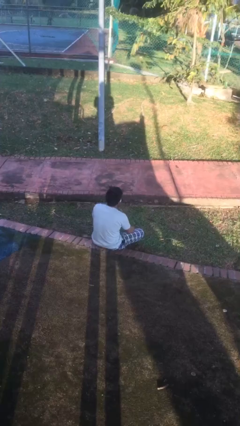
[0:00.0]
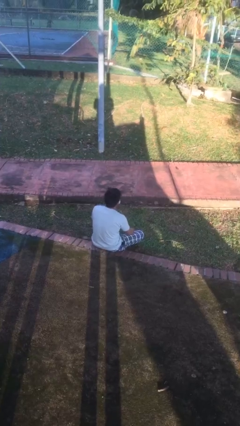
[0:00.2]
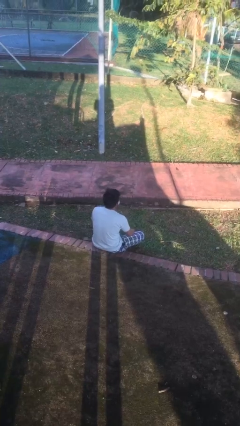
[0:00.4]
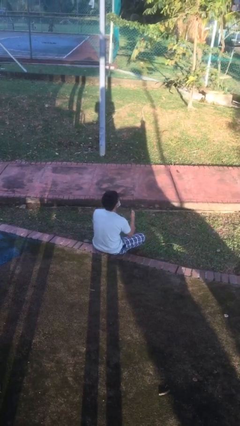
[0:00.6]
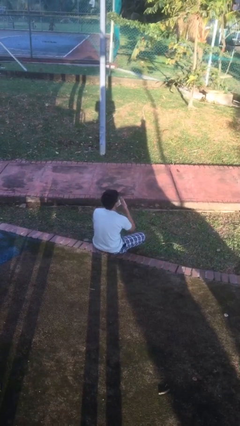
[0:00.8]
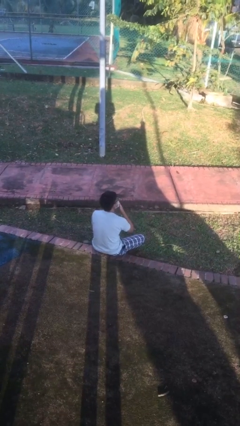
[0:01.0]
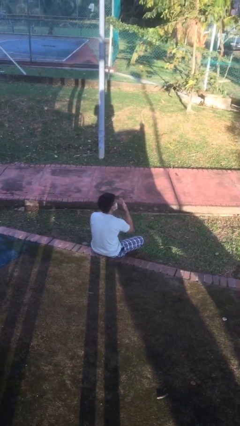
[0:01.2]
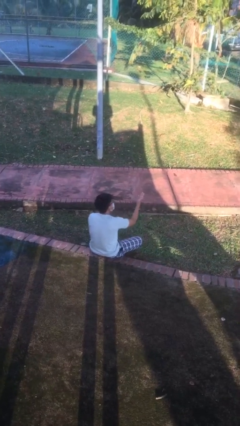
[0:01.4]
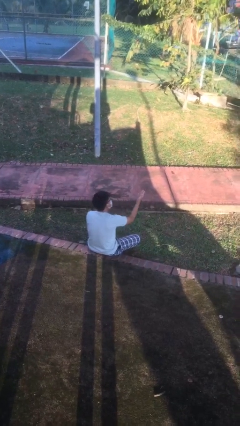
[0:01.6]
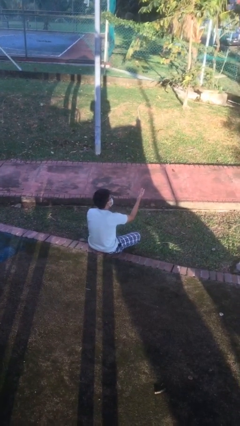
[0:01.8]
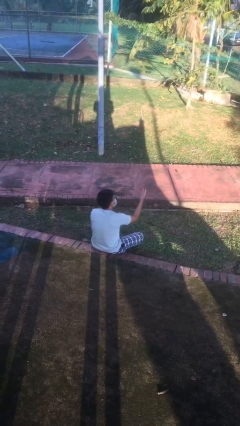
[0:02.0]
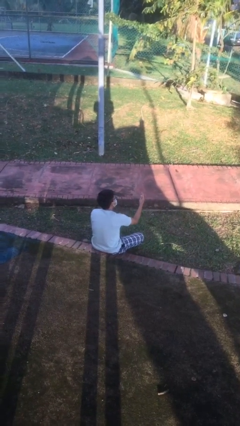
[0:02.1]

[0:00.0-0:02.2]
person gestures blow kiss

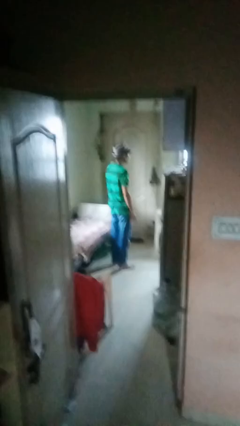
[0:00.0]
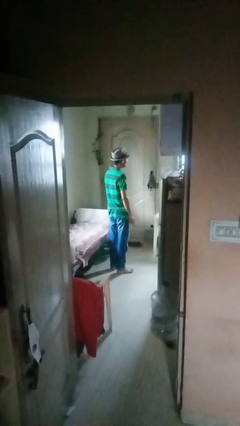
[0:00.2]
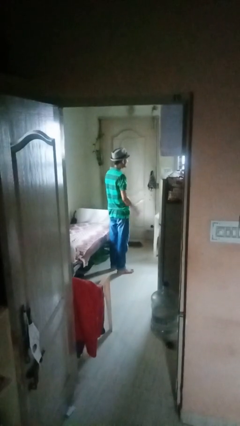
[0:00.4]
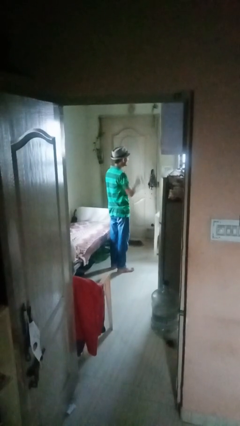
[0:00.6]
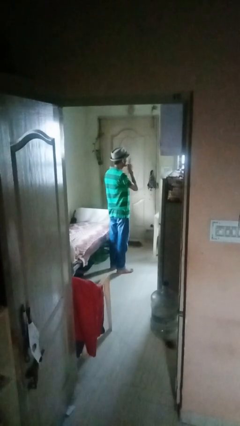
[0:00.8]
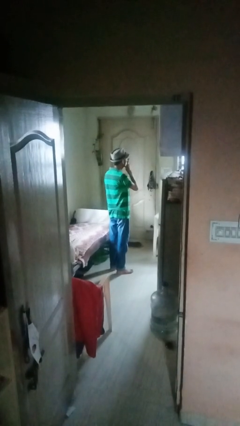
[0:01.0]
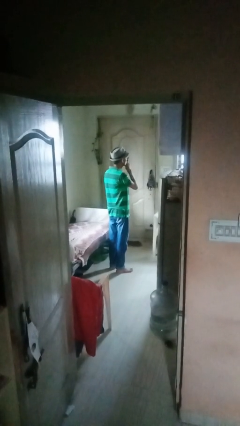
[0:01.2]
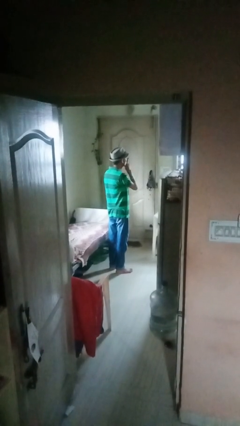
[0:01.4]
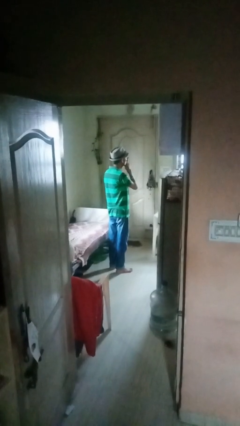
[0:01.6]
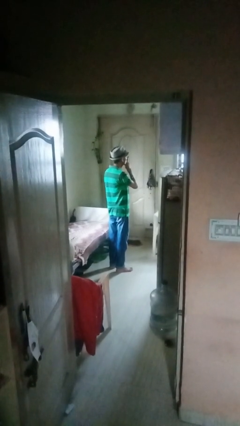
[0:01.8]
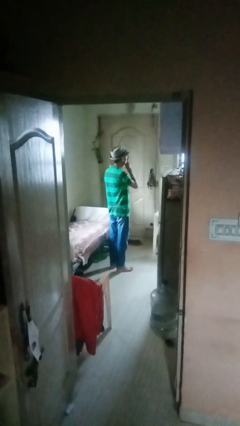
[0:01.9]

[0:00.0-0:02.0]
person gestures be quiet

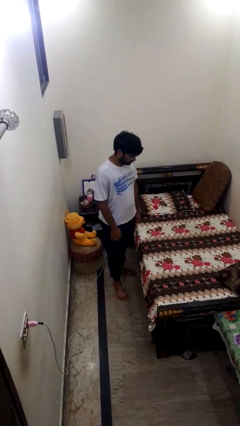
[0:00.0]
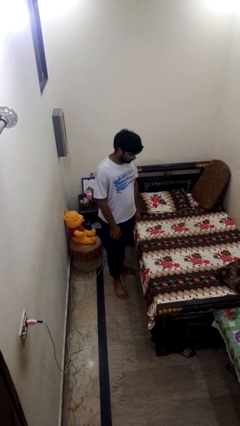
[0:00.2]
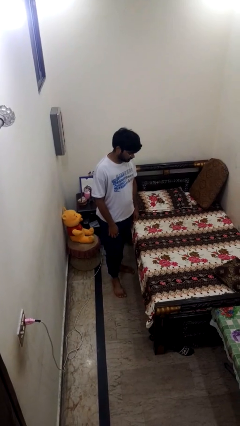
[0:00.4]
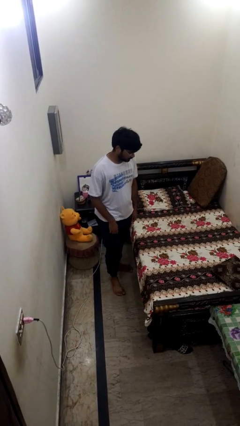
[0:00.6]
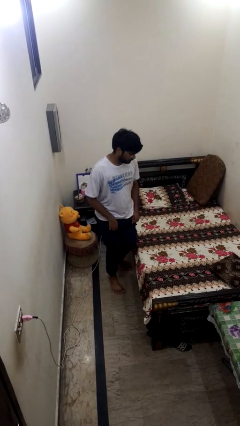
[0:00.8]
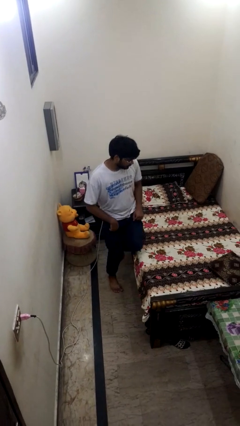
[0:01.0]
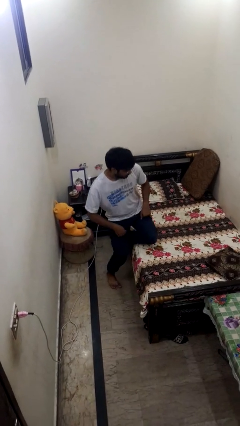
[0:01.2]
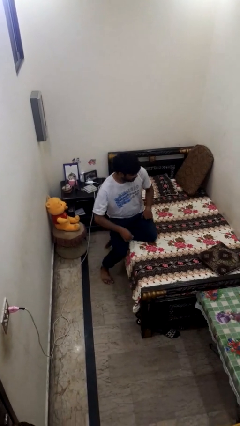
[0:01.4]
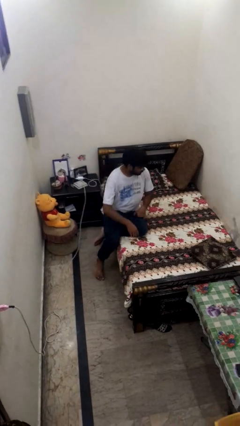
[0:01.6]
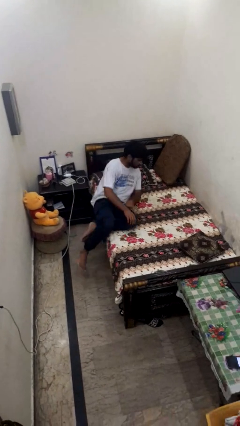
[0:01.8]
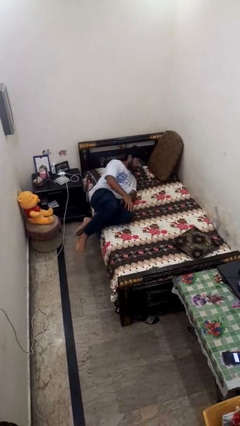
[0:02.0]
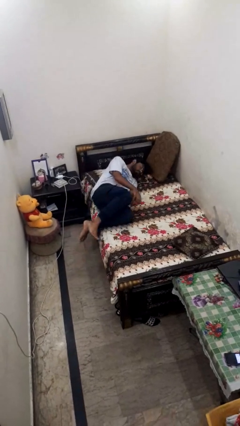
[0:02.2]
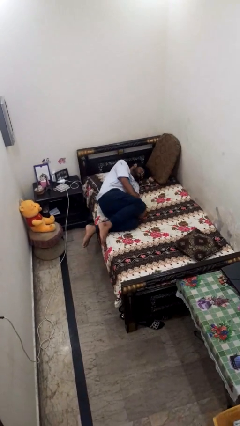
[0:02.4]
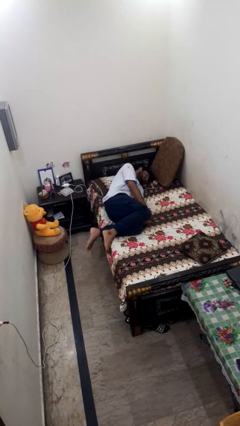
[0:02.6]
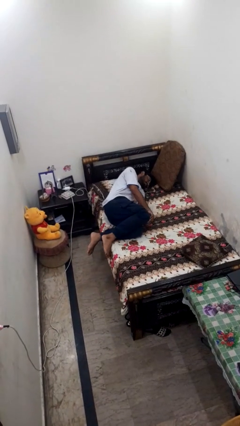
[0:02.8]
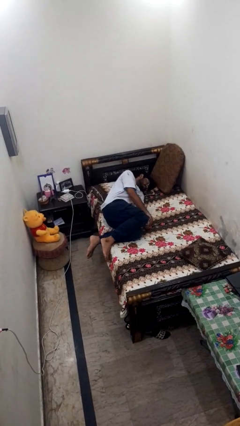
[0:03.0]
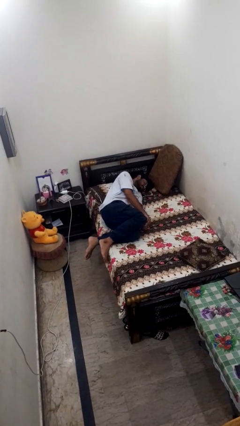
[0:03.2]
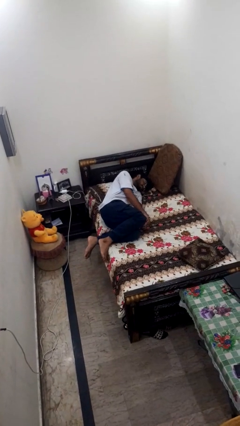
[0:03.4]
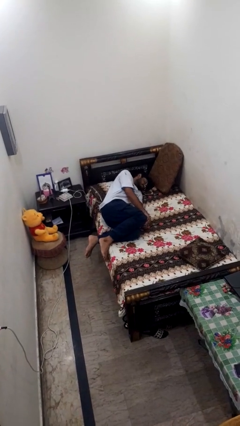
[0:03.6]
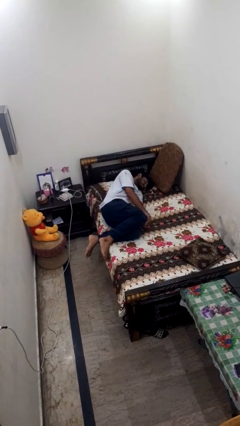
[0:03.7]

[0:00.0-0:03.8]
person lies down on bed

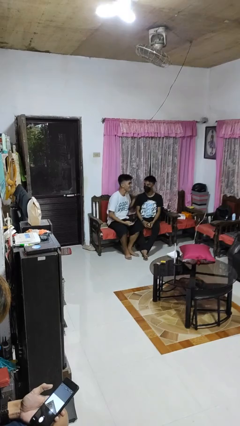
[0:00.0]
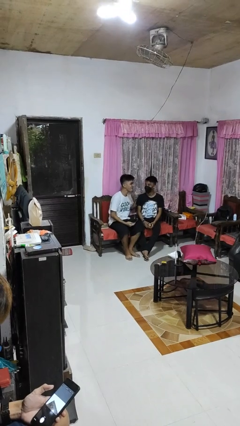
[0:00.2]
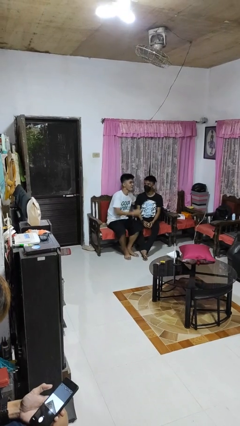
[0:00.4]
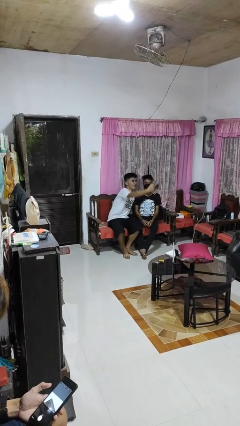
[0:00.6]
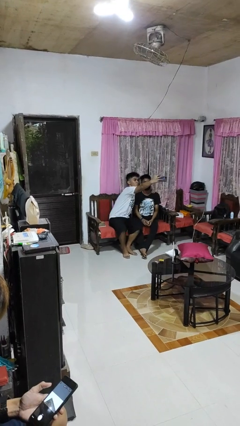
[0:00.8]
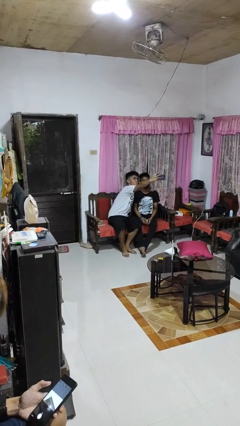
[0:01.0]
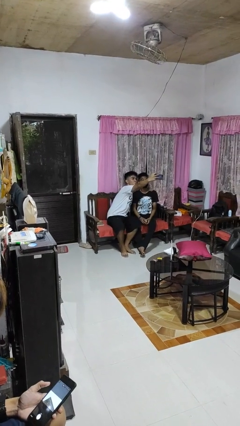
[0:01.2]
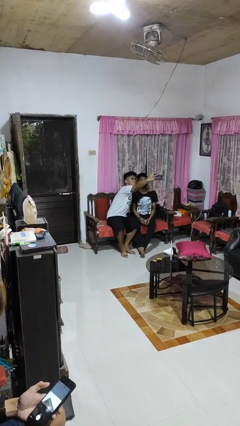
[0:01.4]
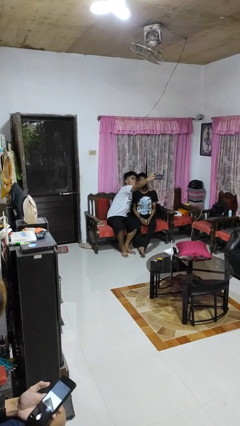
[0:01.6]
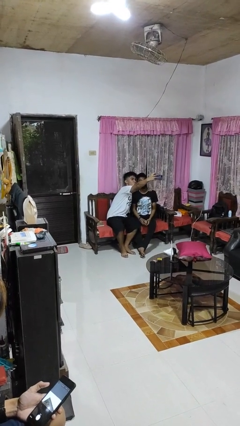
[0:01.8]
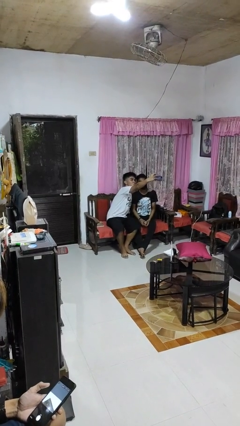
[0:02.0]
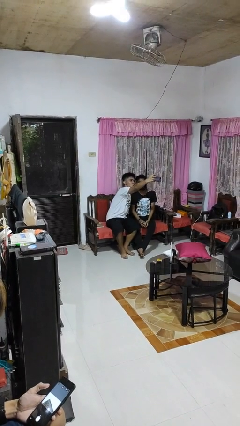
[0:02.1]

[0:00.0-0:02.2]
person takes selfie with person

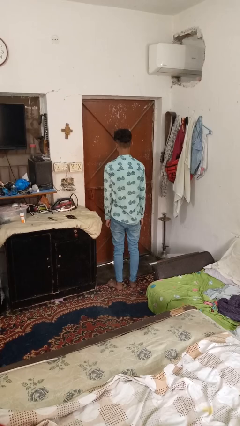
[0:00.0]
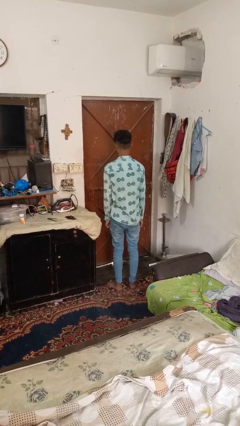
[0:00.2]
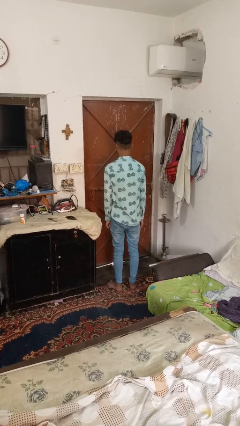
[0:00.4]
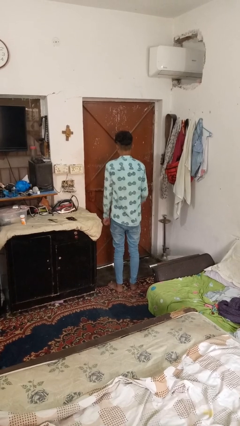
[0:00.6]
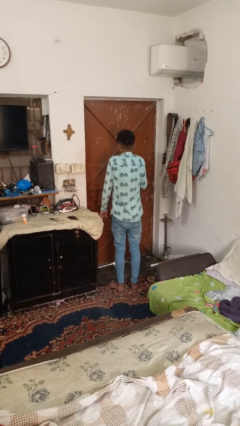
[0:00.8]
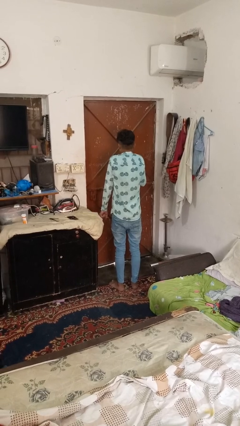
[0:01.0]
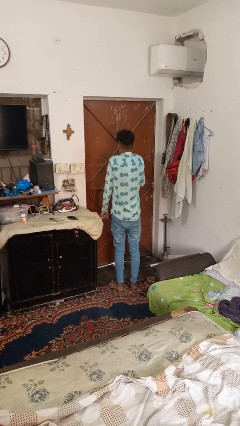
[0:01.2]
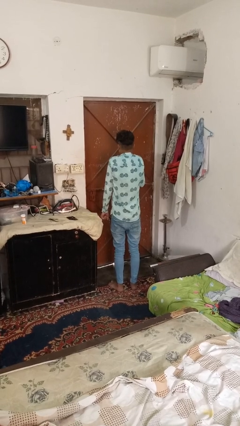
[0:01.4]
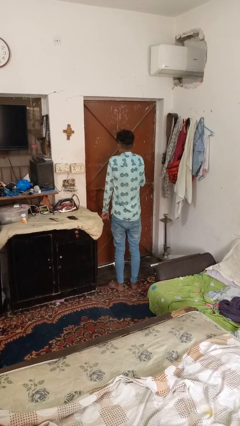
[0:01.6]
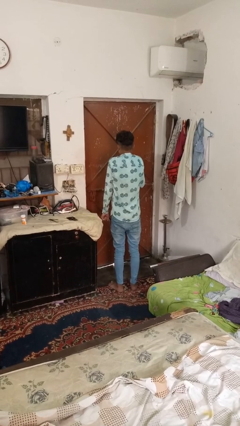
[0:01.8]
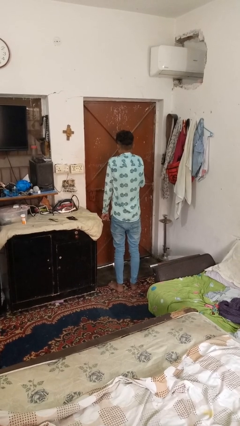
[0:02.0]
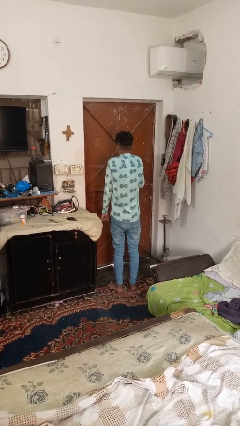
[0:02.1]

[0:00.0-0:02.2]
person shrugs

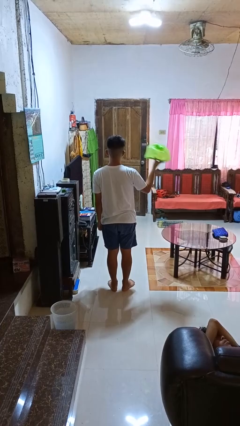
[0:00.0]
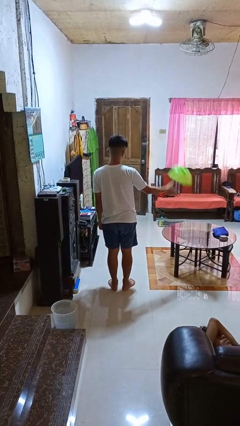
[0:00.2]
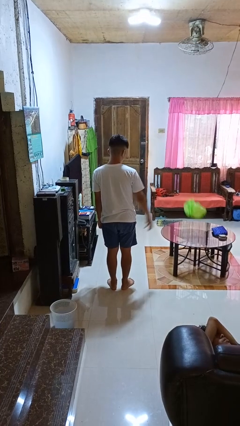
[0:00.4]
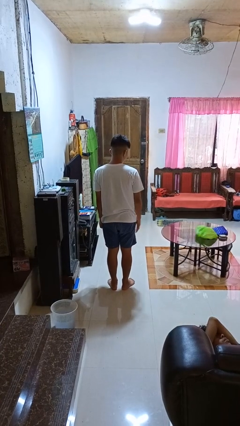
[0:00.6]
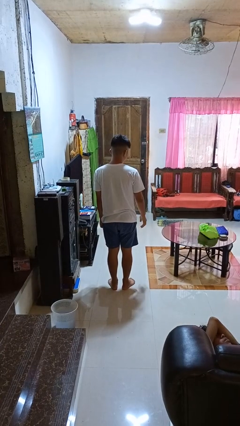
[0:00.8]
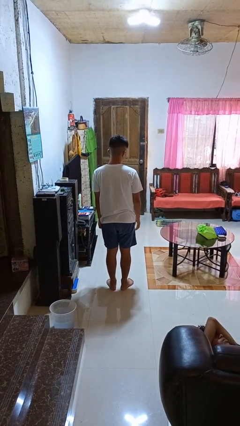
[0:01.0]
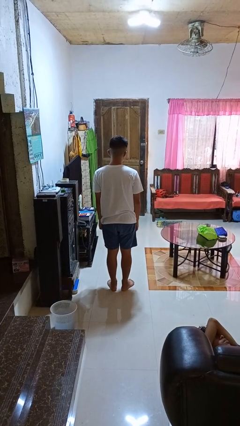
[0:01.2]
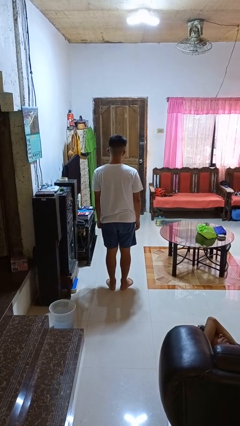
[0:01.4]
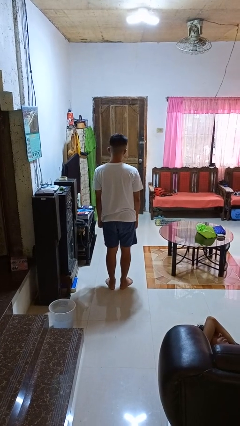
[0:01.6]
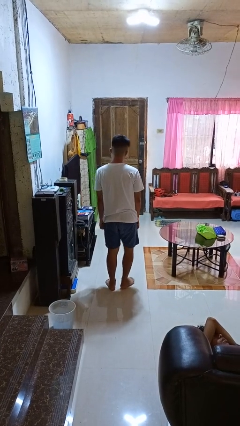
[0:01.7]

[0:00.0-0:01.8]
person throws object on table

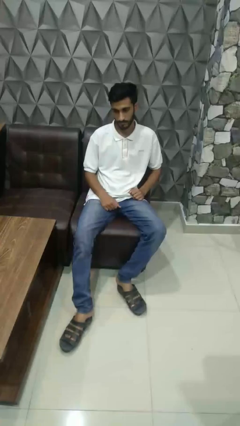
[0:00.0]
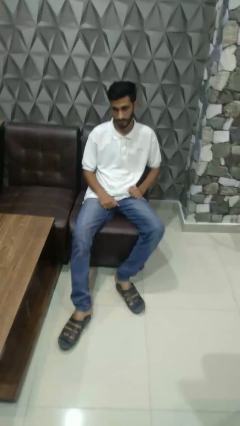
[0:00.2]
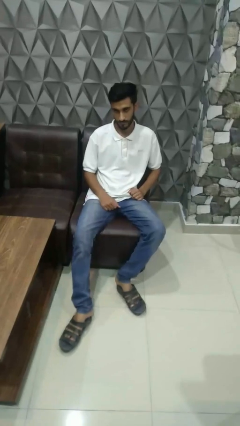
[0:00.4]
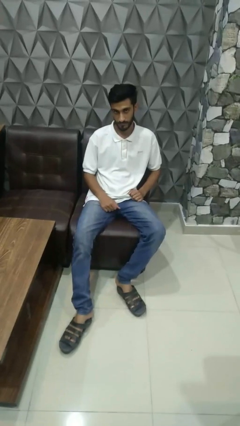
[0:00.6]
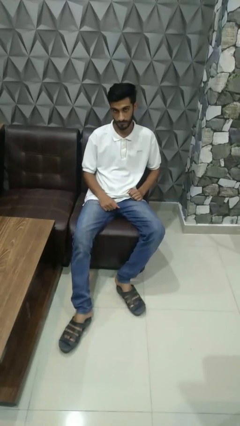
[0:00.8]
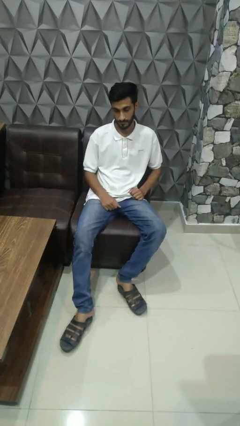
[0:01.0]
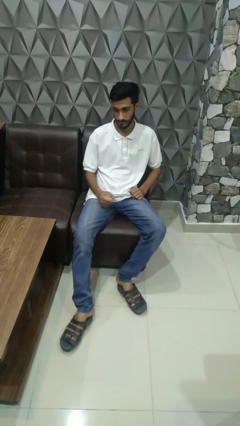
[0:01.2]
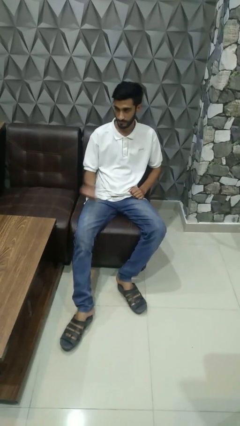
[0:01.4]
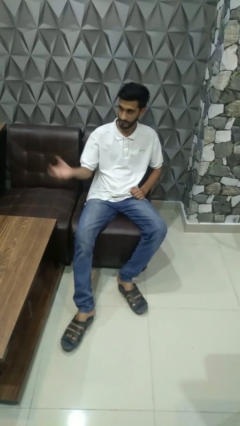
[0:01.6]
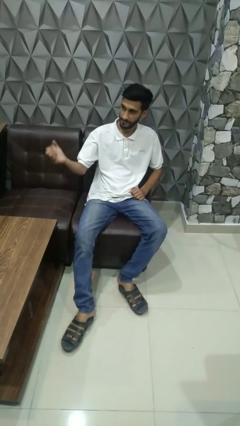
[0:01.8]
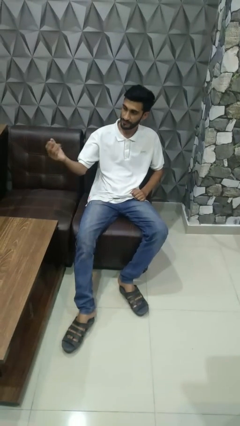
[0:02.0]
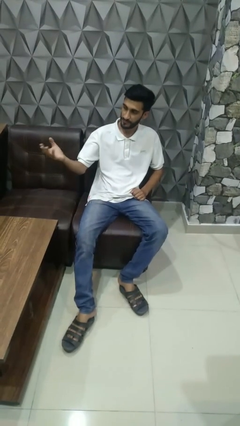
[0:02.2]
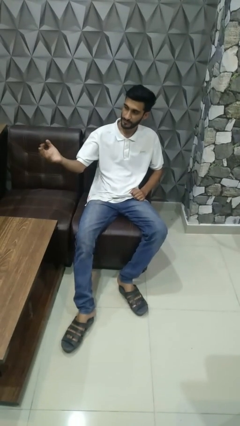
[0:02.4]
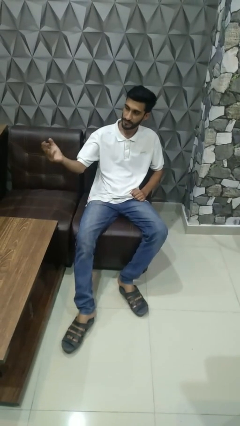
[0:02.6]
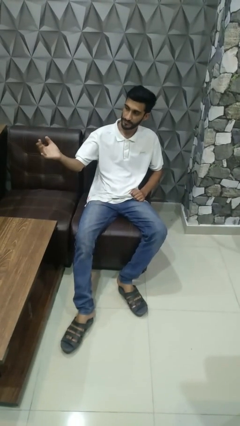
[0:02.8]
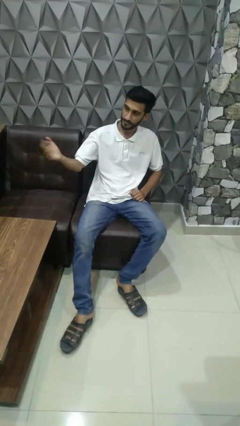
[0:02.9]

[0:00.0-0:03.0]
person gestures come here
